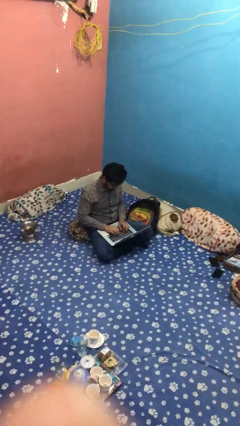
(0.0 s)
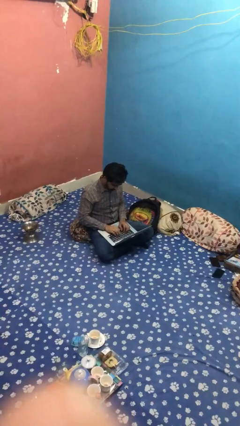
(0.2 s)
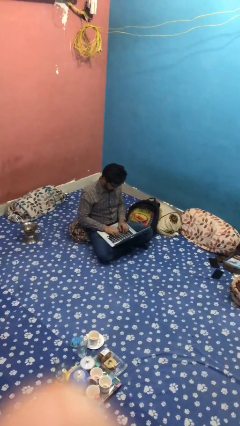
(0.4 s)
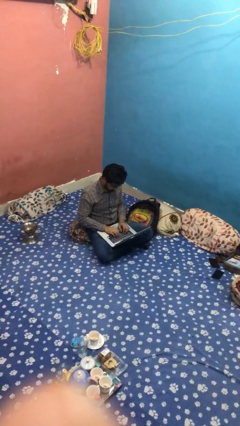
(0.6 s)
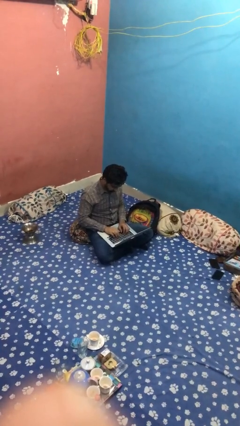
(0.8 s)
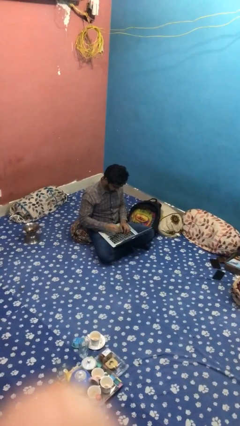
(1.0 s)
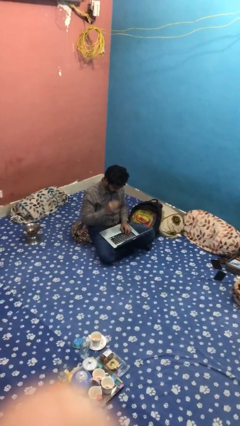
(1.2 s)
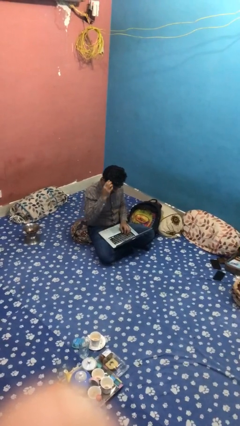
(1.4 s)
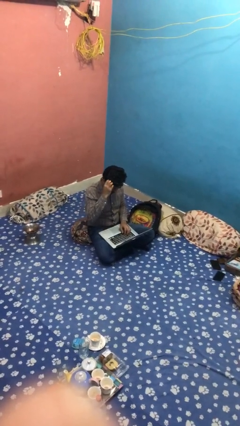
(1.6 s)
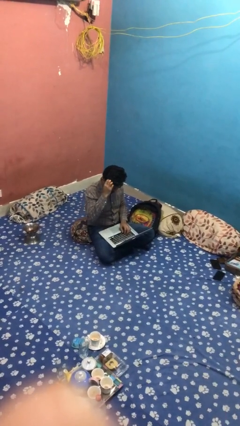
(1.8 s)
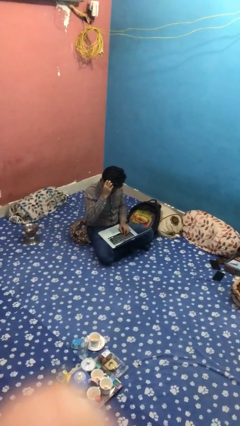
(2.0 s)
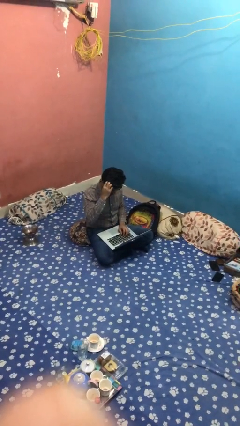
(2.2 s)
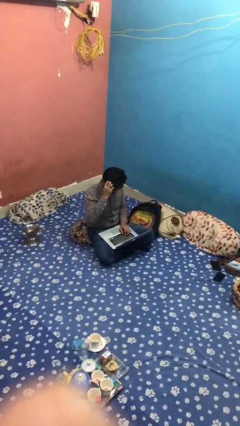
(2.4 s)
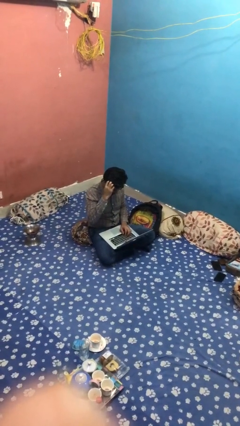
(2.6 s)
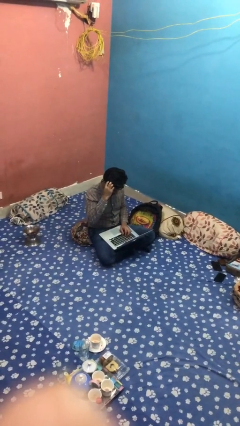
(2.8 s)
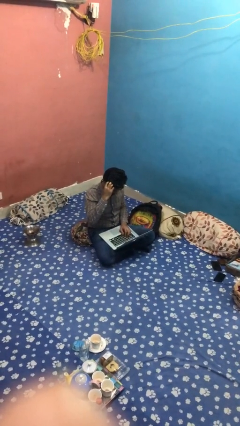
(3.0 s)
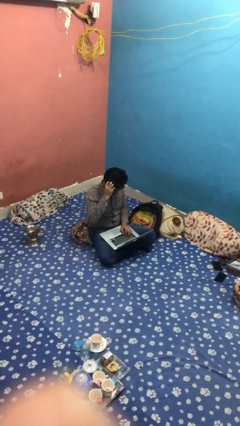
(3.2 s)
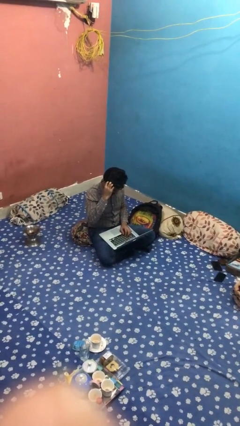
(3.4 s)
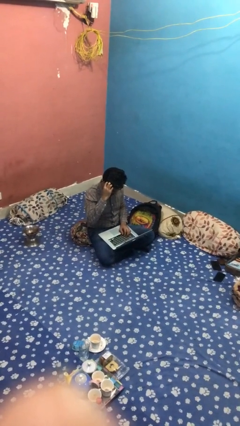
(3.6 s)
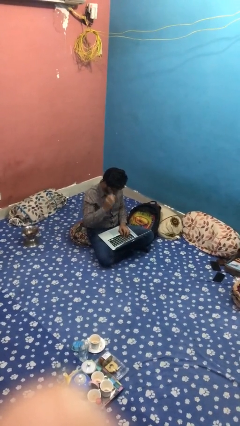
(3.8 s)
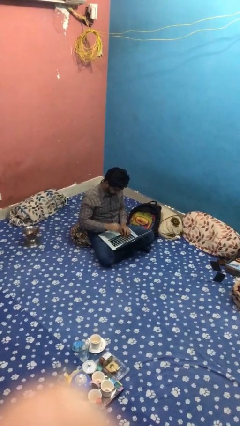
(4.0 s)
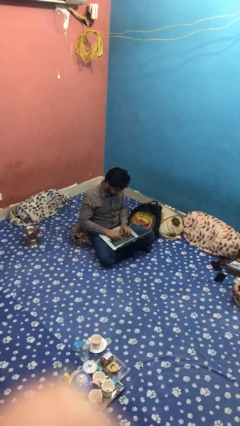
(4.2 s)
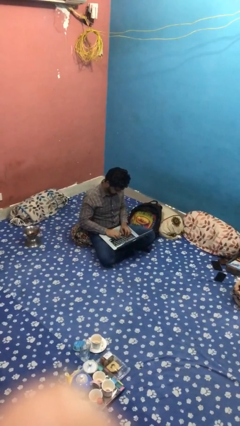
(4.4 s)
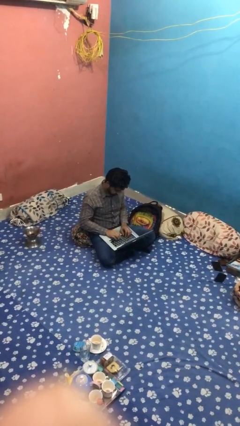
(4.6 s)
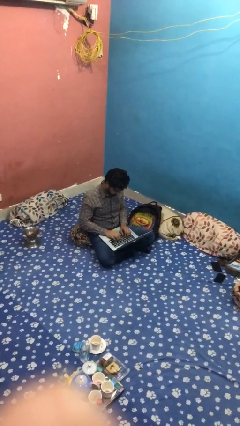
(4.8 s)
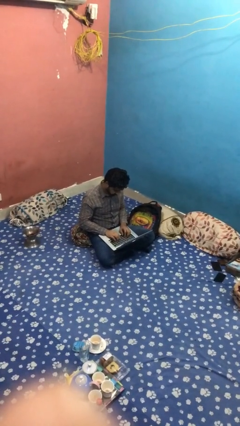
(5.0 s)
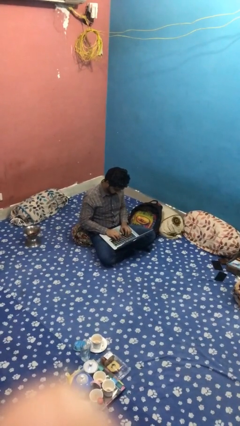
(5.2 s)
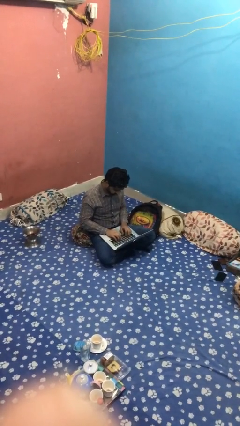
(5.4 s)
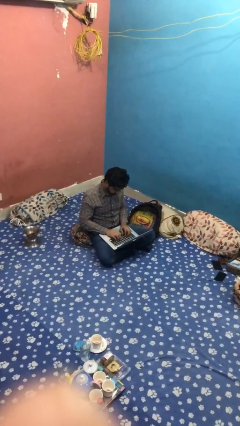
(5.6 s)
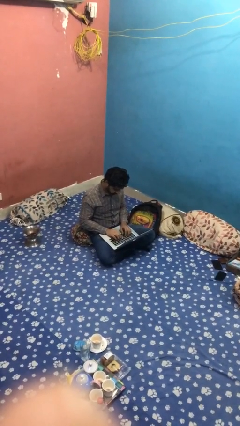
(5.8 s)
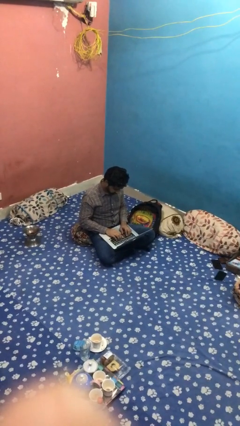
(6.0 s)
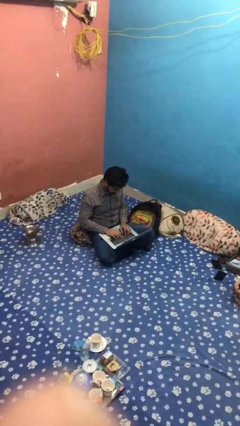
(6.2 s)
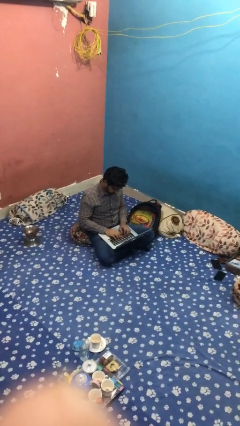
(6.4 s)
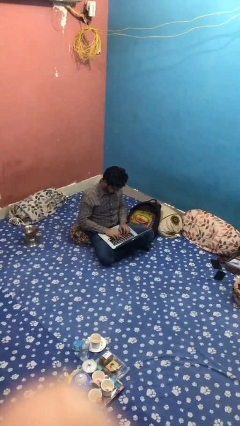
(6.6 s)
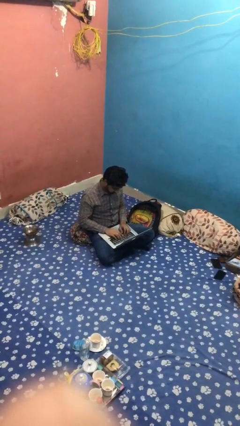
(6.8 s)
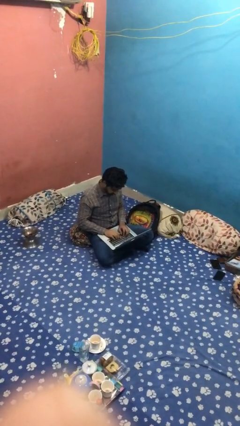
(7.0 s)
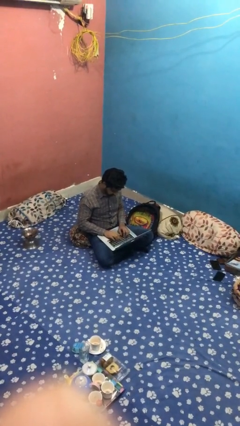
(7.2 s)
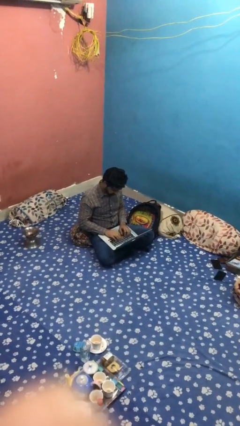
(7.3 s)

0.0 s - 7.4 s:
person interacts with laptop

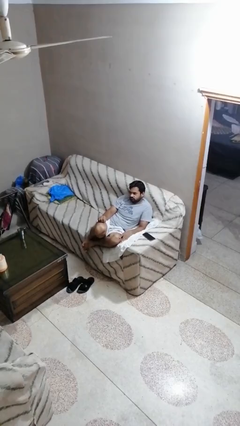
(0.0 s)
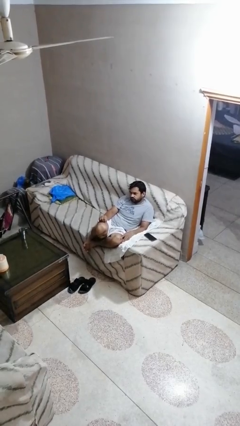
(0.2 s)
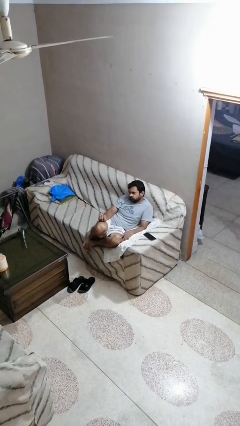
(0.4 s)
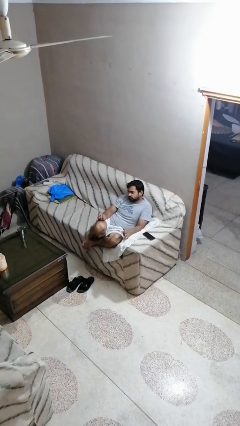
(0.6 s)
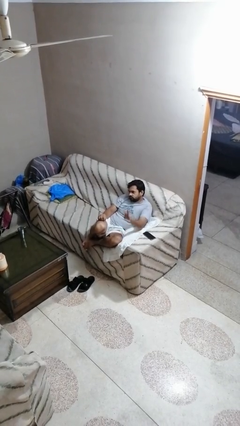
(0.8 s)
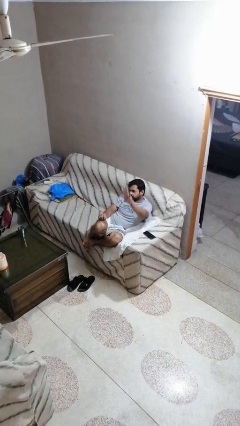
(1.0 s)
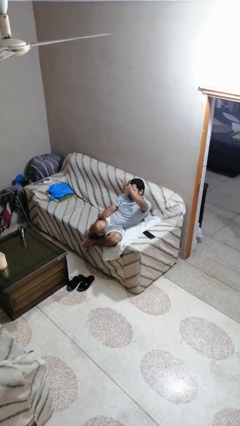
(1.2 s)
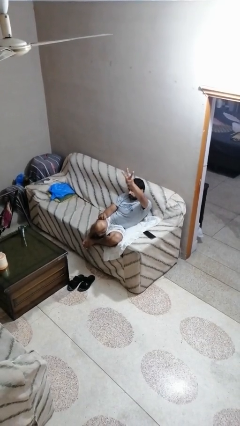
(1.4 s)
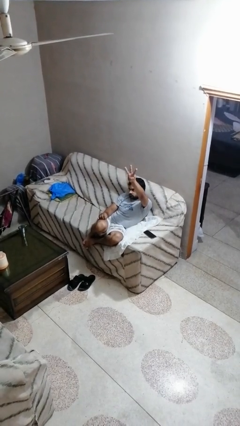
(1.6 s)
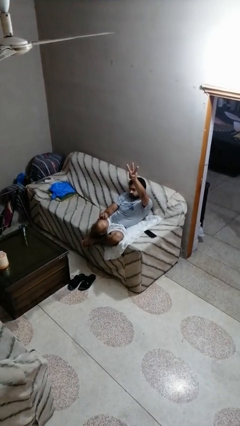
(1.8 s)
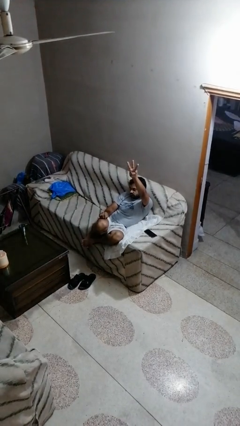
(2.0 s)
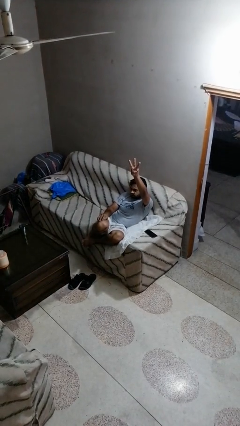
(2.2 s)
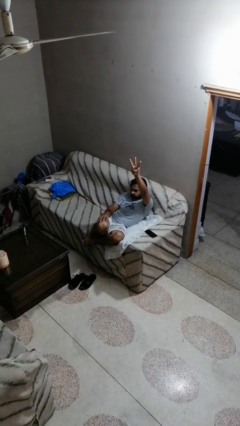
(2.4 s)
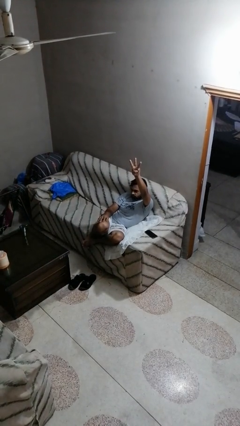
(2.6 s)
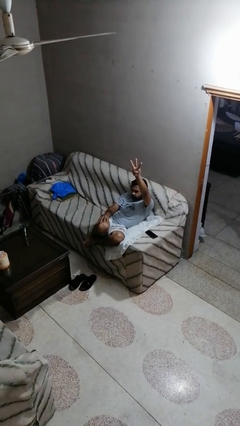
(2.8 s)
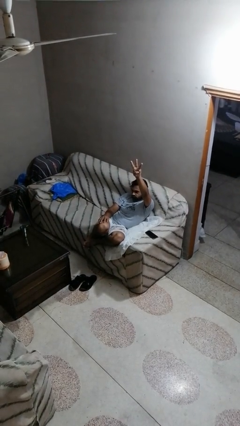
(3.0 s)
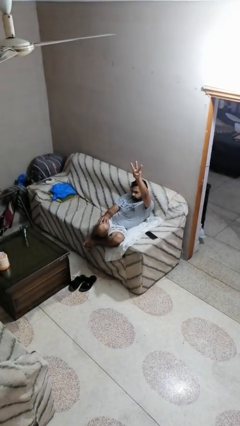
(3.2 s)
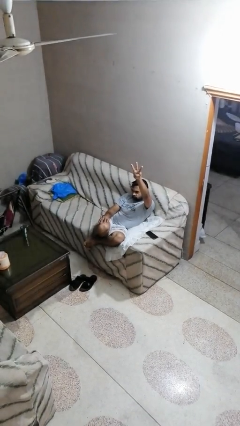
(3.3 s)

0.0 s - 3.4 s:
person gestures number three

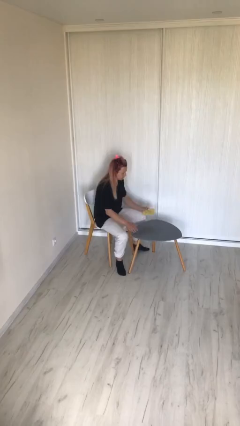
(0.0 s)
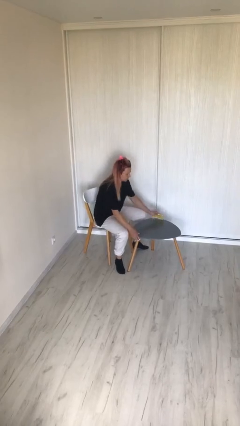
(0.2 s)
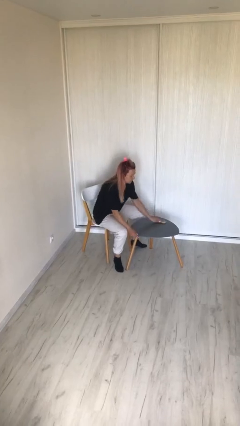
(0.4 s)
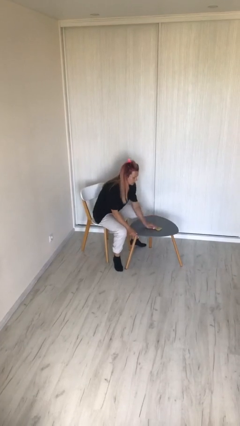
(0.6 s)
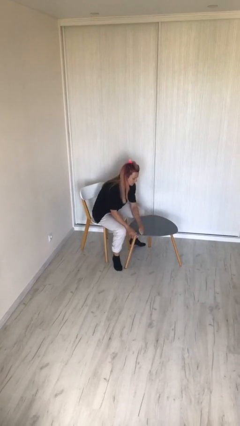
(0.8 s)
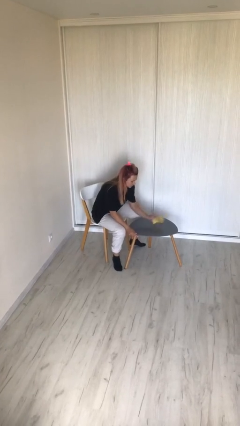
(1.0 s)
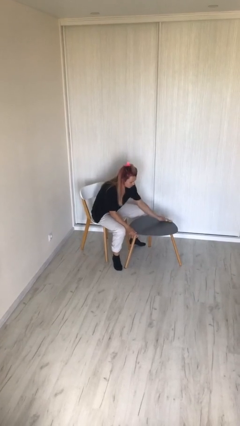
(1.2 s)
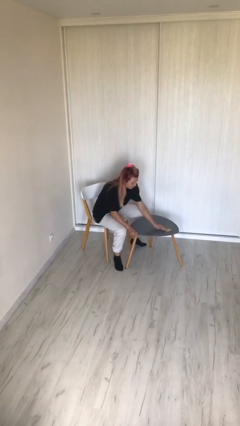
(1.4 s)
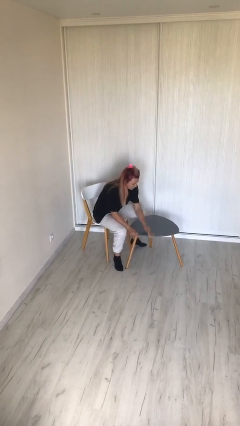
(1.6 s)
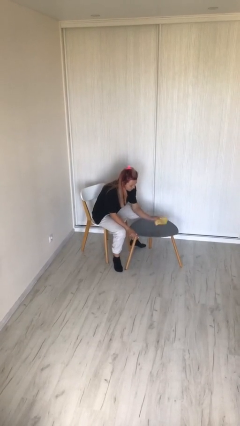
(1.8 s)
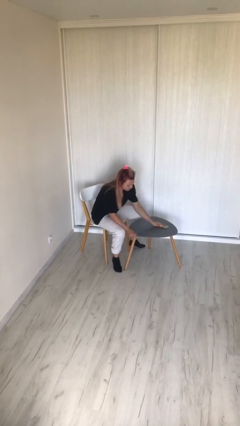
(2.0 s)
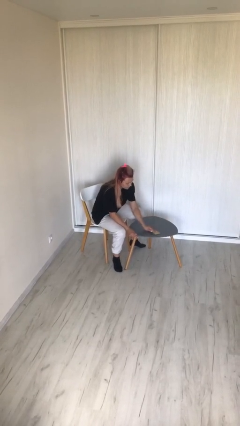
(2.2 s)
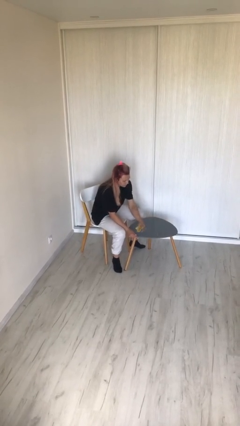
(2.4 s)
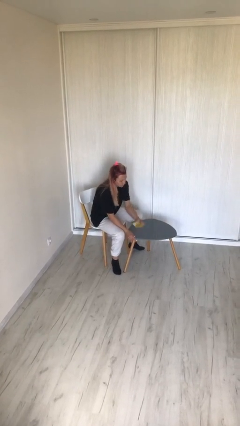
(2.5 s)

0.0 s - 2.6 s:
person cleans table with rag

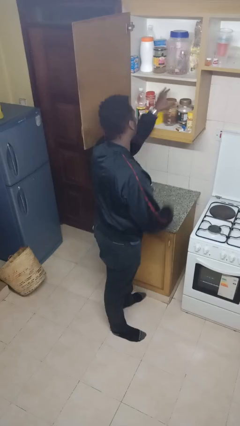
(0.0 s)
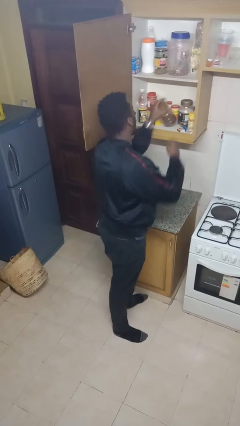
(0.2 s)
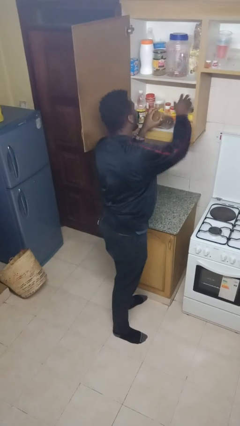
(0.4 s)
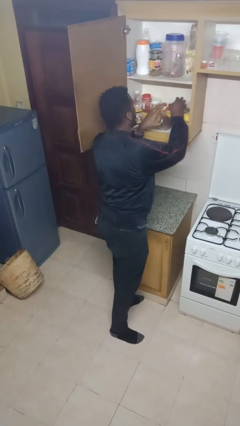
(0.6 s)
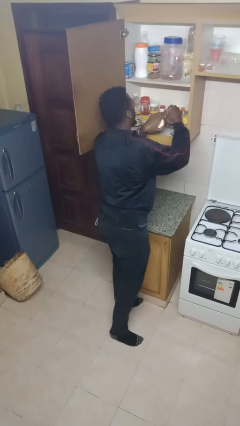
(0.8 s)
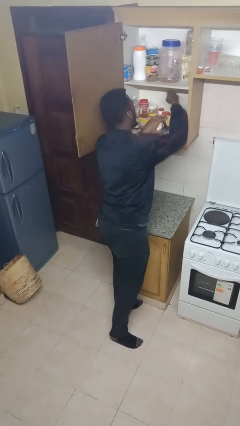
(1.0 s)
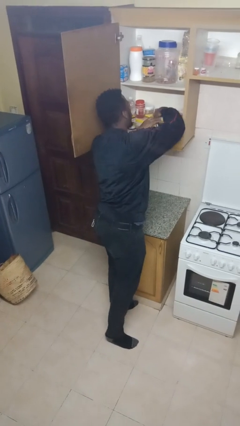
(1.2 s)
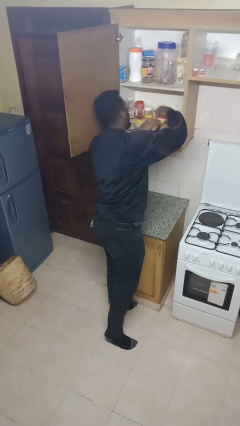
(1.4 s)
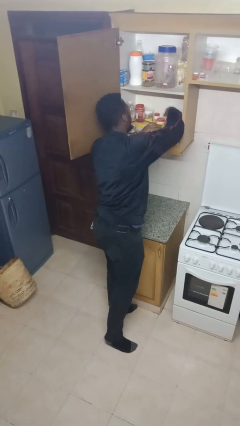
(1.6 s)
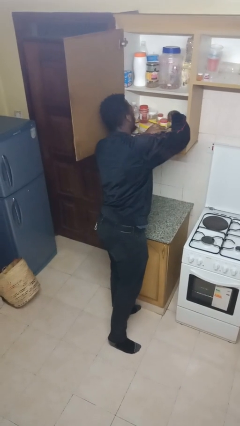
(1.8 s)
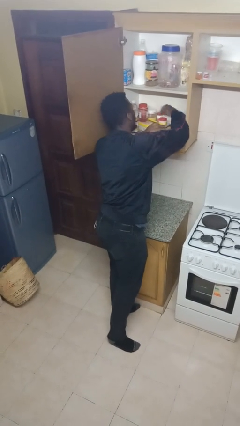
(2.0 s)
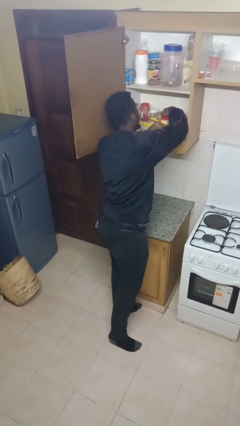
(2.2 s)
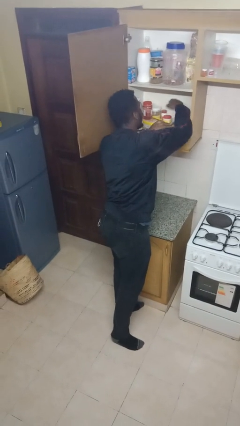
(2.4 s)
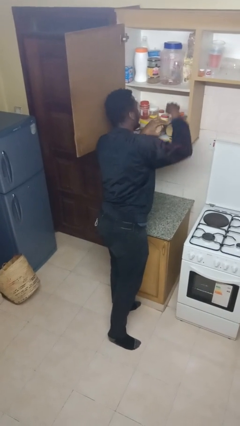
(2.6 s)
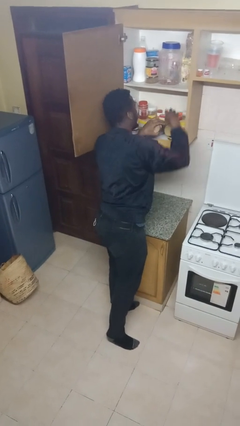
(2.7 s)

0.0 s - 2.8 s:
person searches in cabinet

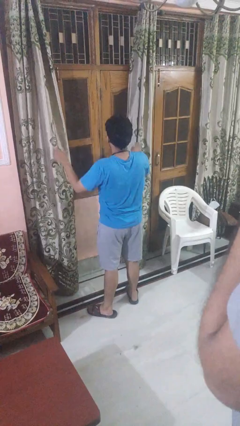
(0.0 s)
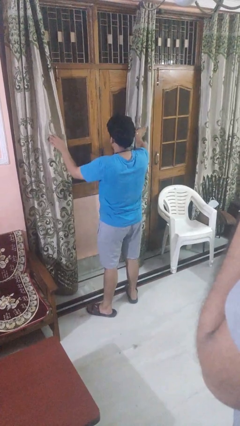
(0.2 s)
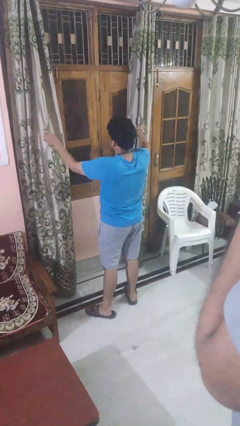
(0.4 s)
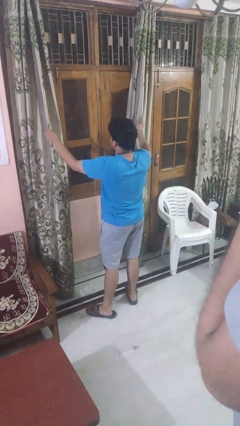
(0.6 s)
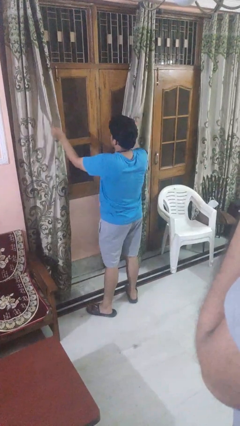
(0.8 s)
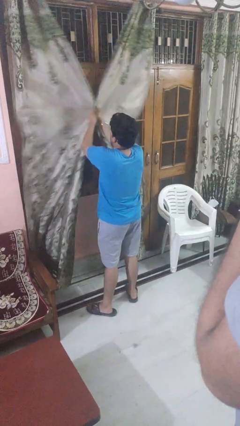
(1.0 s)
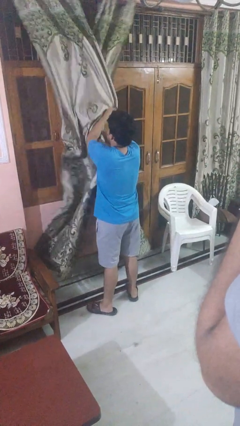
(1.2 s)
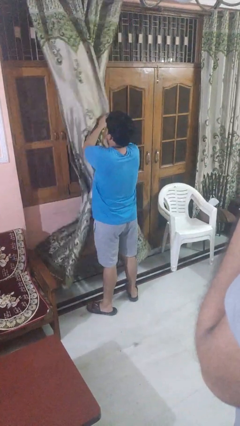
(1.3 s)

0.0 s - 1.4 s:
person closes curtains

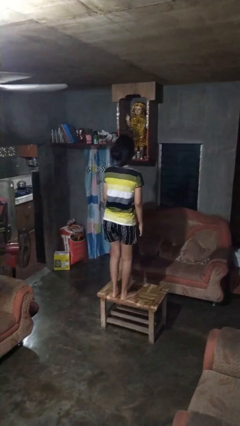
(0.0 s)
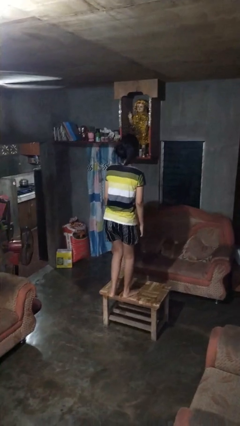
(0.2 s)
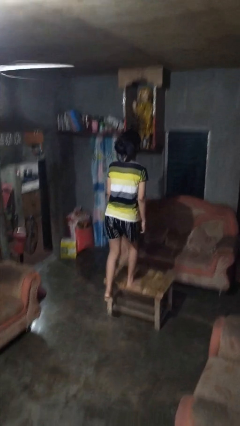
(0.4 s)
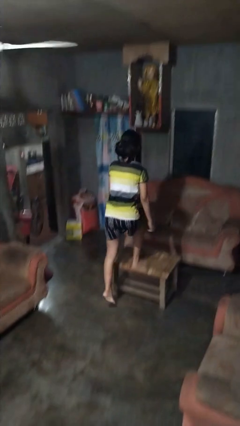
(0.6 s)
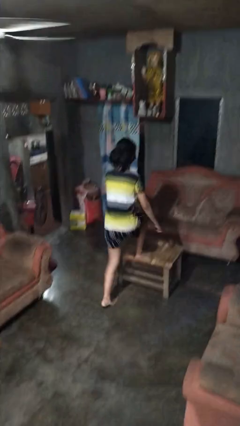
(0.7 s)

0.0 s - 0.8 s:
person climbs off table
